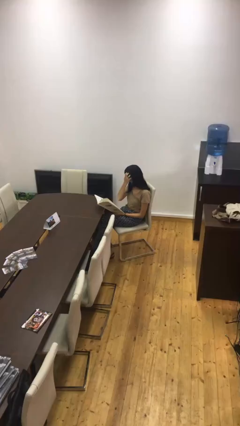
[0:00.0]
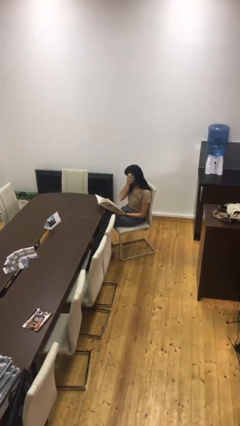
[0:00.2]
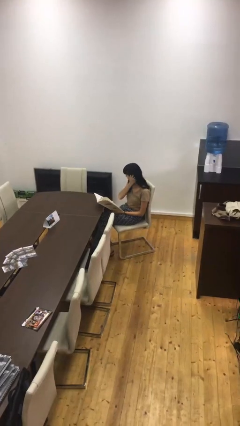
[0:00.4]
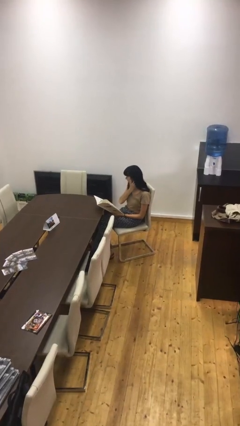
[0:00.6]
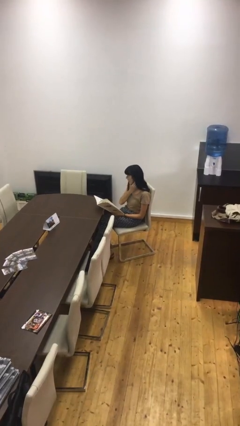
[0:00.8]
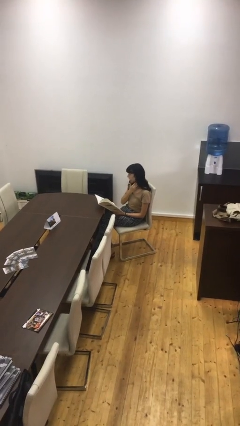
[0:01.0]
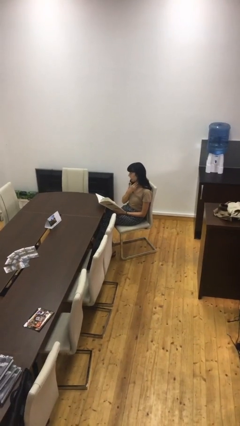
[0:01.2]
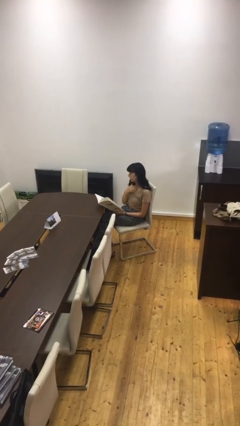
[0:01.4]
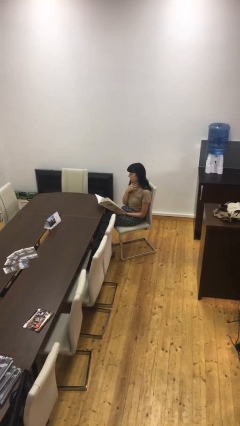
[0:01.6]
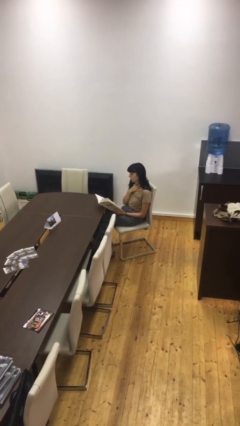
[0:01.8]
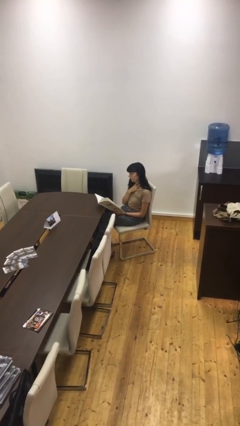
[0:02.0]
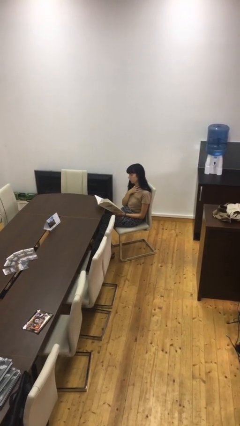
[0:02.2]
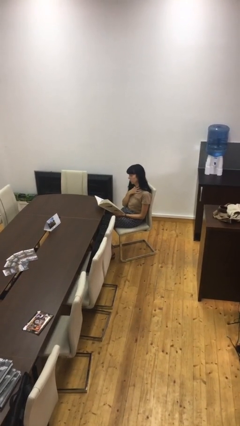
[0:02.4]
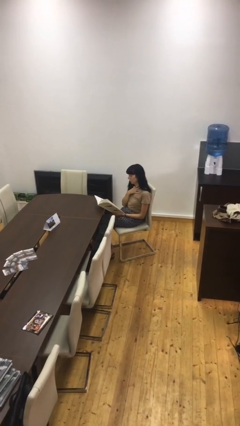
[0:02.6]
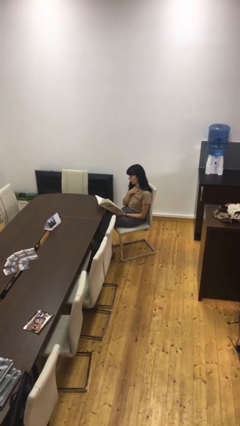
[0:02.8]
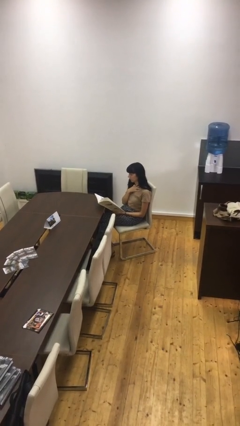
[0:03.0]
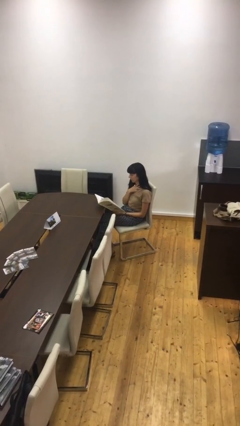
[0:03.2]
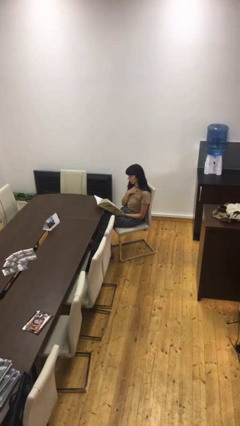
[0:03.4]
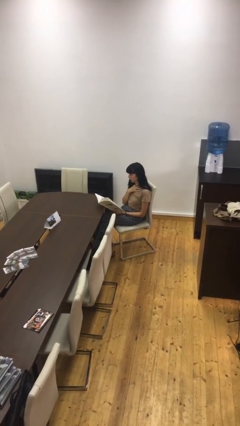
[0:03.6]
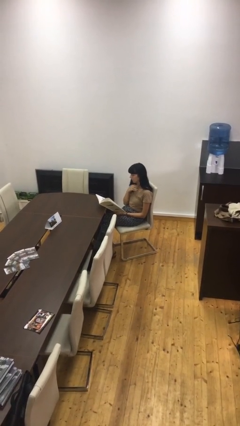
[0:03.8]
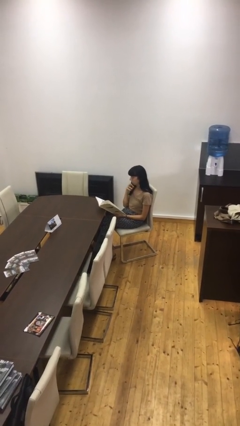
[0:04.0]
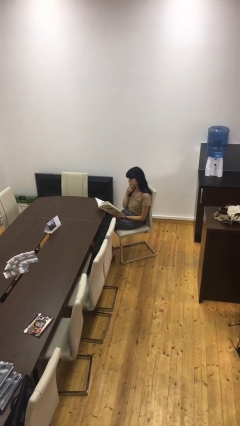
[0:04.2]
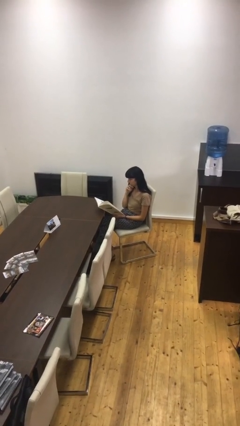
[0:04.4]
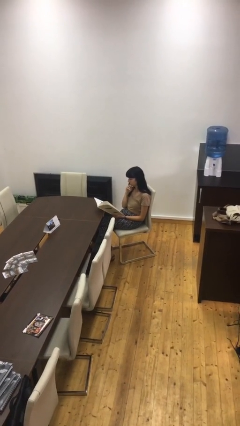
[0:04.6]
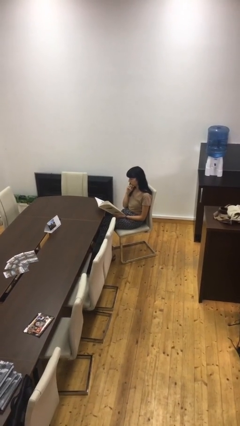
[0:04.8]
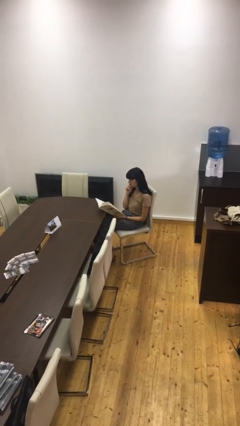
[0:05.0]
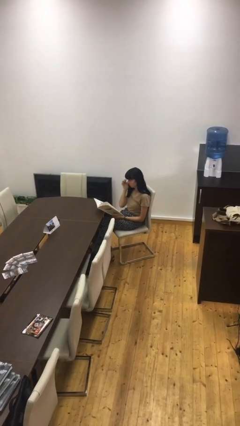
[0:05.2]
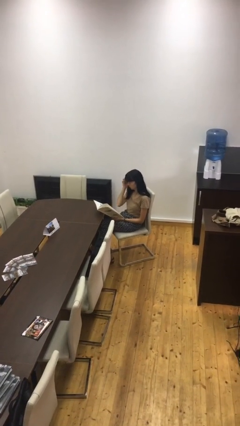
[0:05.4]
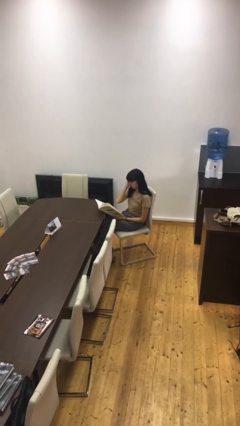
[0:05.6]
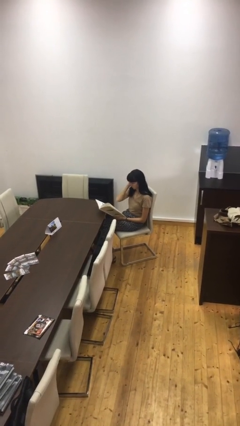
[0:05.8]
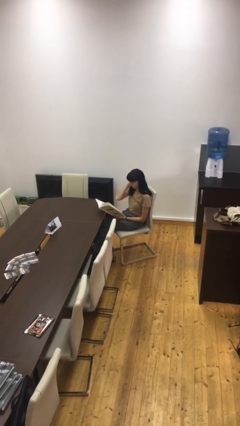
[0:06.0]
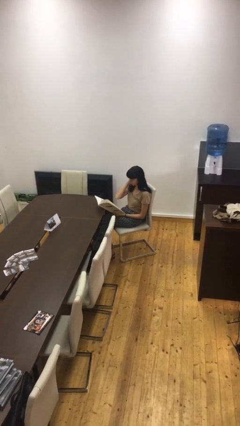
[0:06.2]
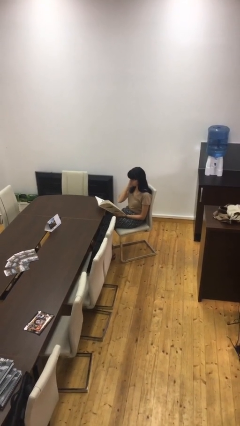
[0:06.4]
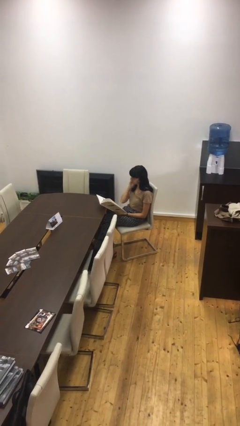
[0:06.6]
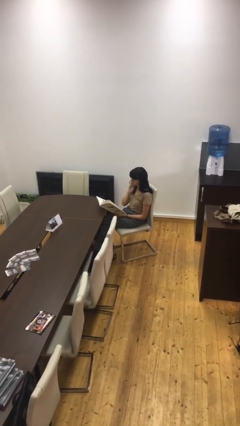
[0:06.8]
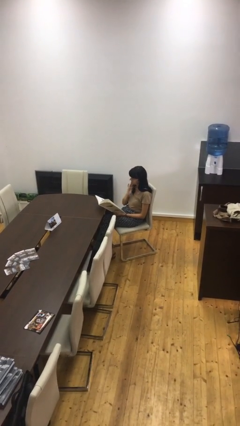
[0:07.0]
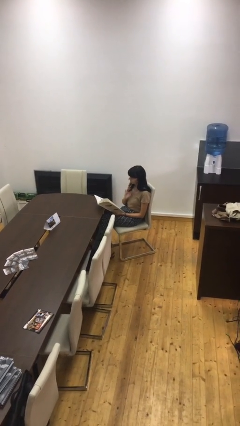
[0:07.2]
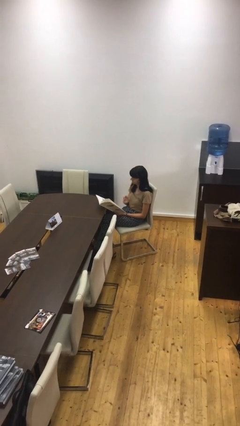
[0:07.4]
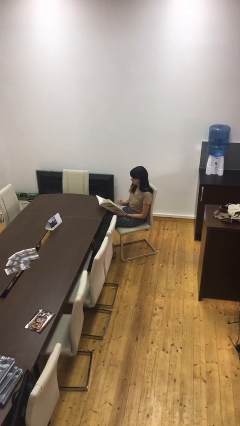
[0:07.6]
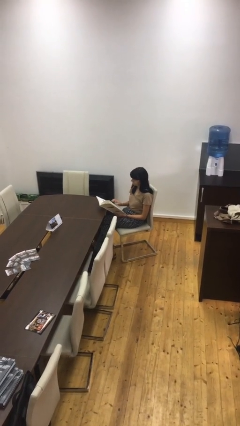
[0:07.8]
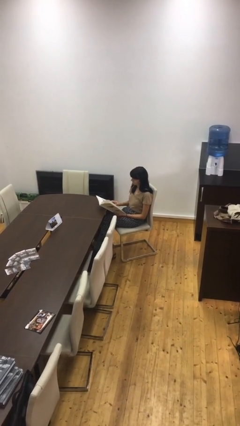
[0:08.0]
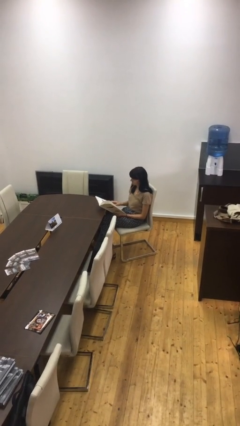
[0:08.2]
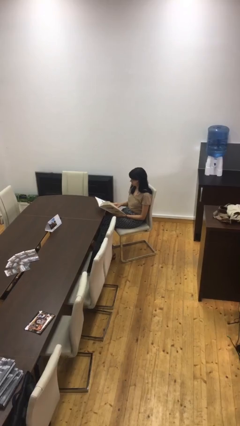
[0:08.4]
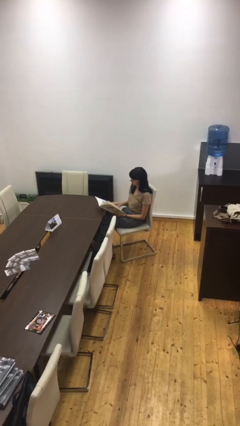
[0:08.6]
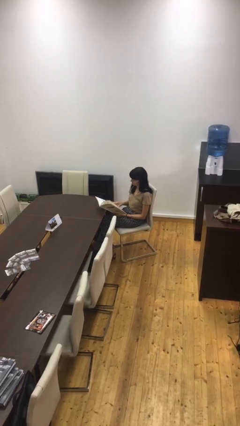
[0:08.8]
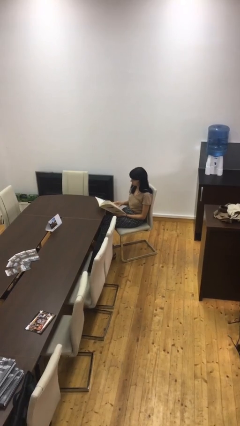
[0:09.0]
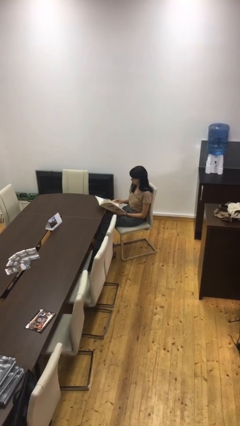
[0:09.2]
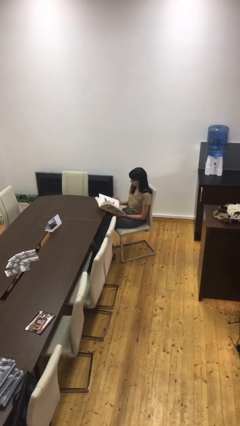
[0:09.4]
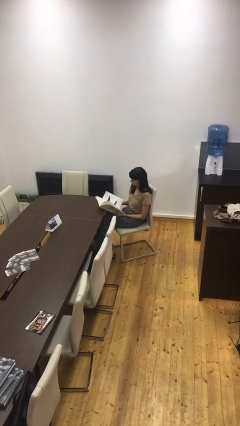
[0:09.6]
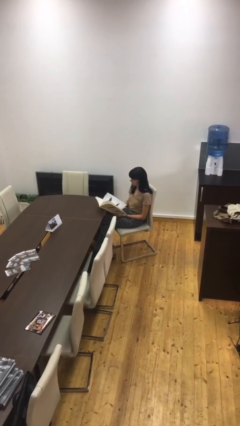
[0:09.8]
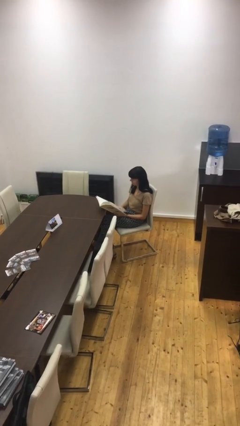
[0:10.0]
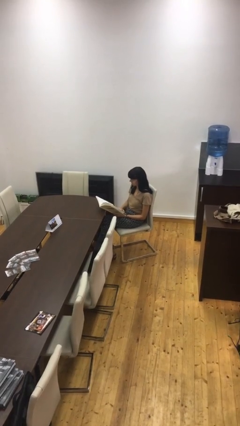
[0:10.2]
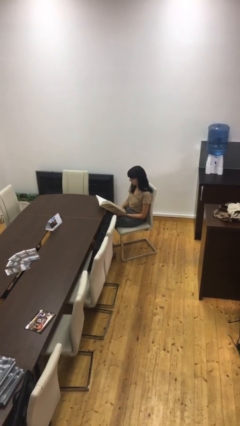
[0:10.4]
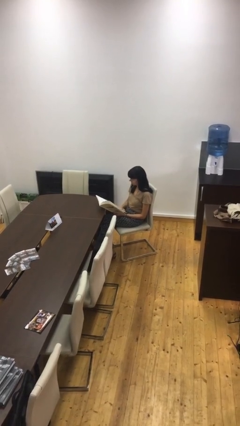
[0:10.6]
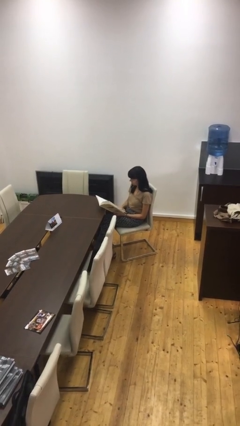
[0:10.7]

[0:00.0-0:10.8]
person reads document

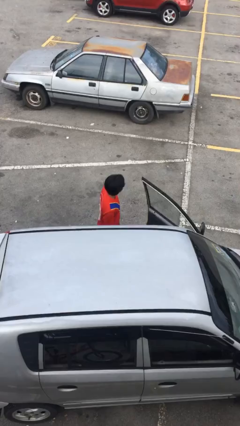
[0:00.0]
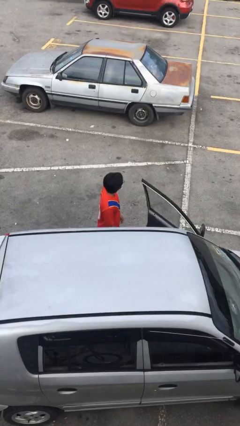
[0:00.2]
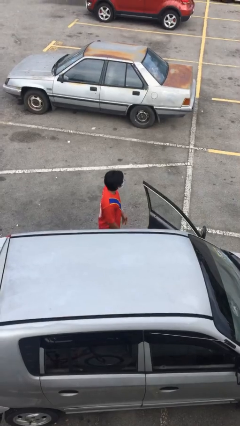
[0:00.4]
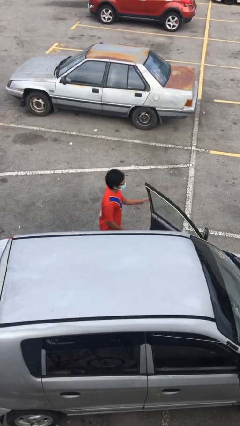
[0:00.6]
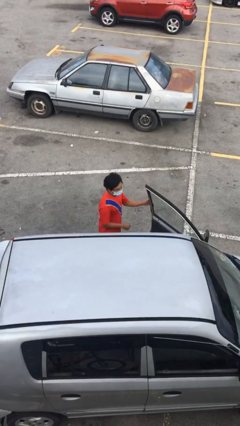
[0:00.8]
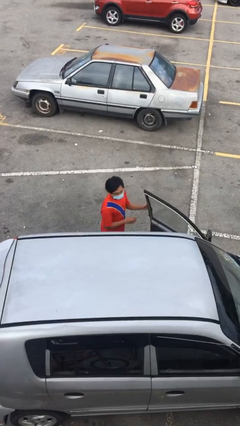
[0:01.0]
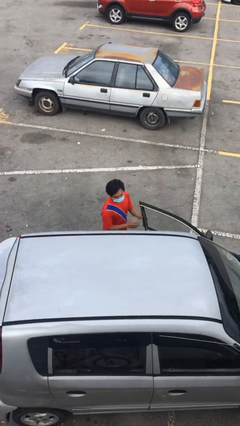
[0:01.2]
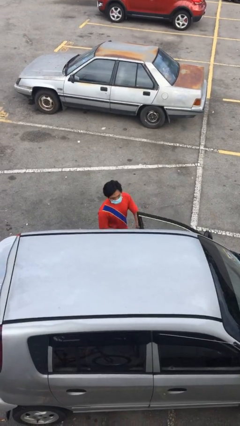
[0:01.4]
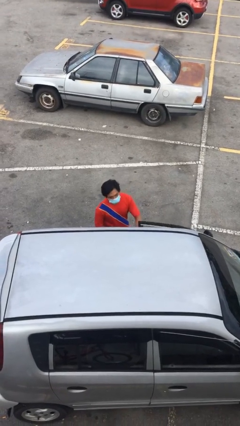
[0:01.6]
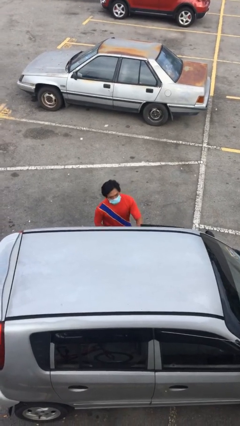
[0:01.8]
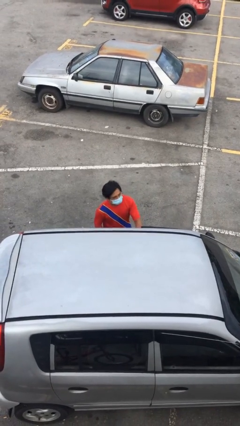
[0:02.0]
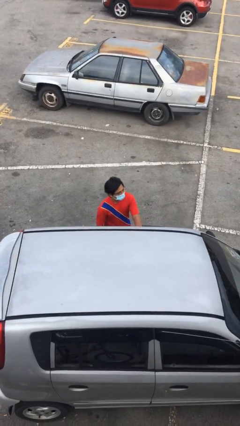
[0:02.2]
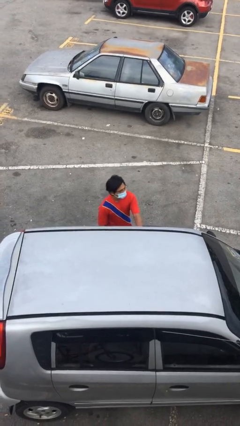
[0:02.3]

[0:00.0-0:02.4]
person closes car door

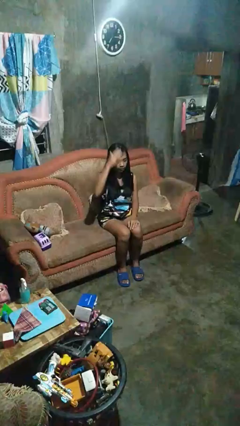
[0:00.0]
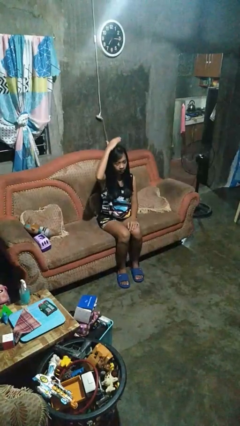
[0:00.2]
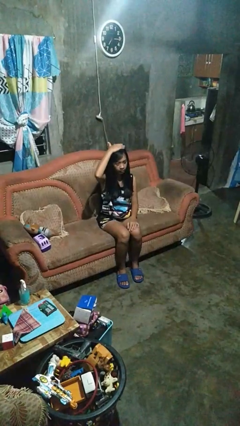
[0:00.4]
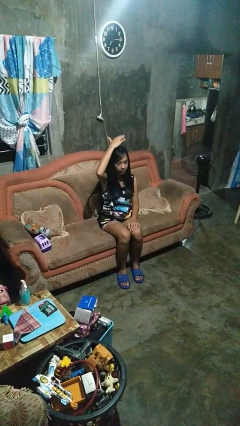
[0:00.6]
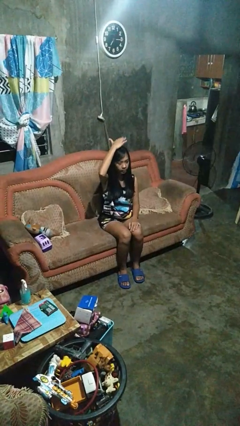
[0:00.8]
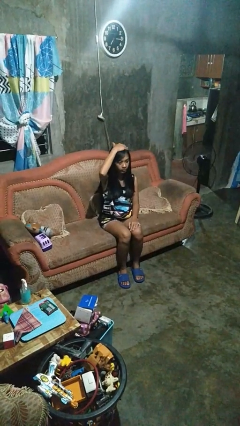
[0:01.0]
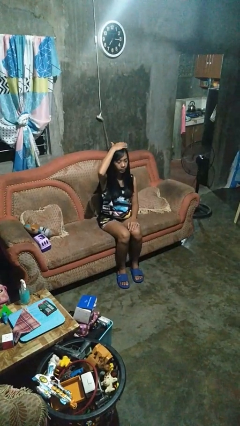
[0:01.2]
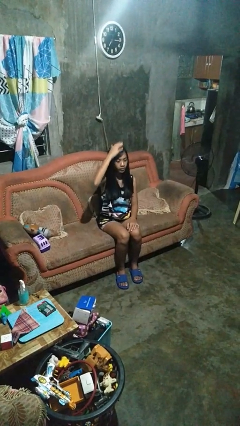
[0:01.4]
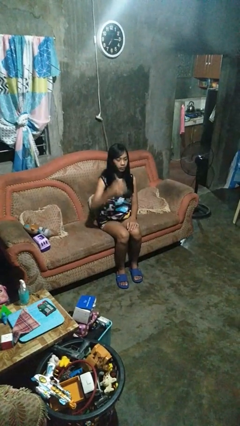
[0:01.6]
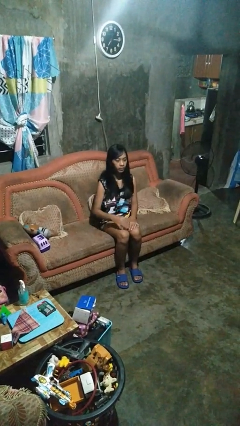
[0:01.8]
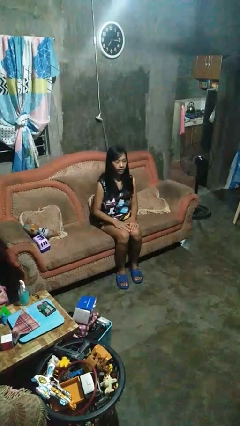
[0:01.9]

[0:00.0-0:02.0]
person pats head

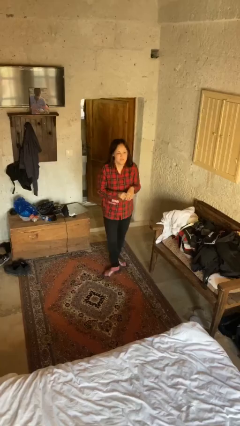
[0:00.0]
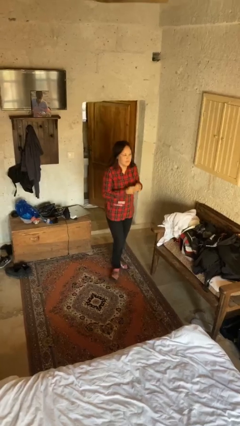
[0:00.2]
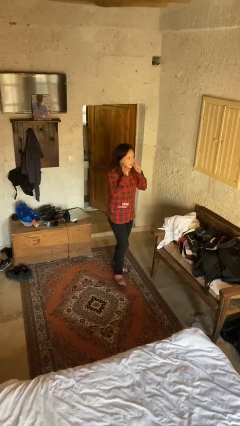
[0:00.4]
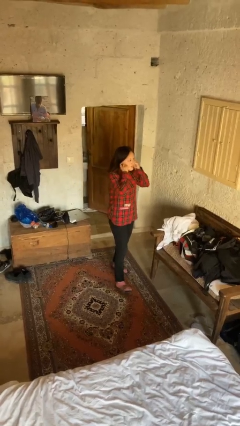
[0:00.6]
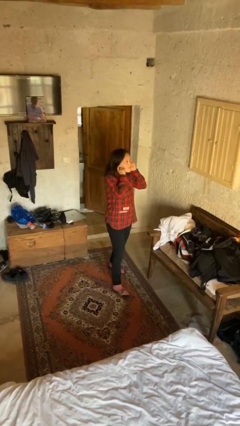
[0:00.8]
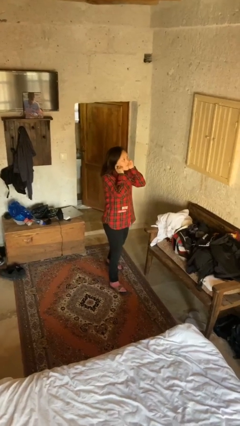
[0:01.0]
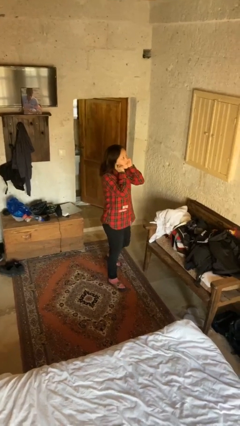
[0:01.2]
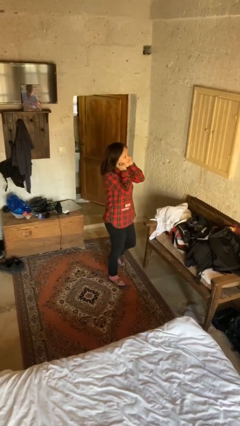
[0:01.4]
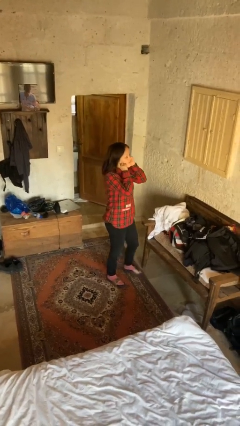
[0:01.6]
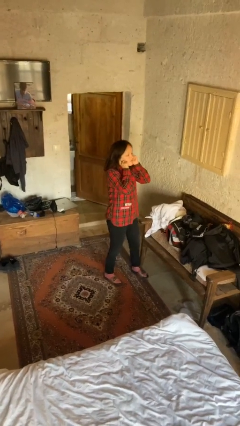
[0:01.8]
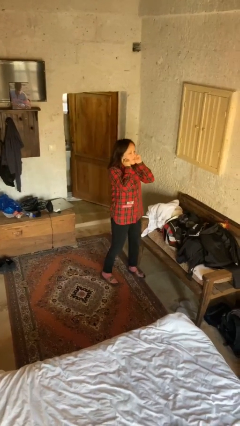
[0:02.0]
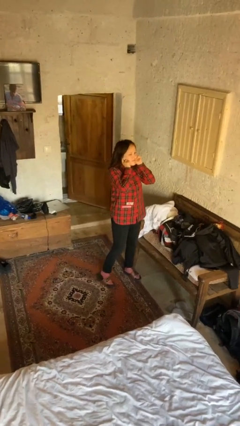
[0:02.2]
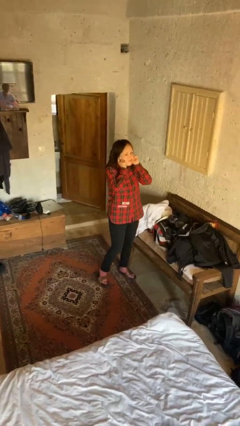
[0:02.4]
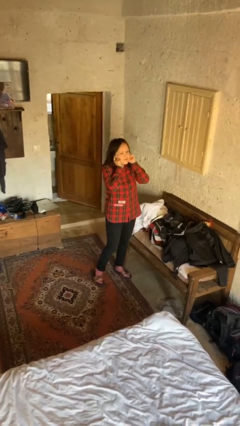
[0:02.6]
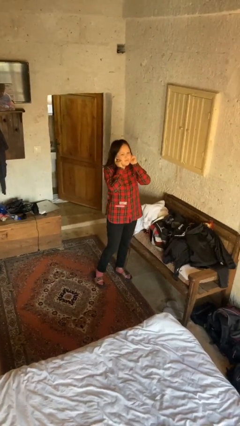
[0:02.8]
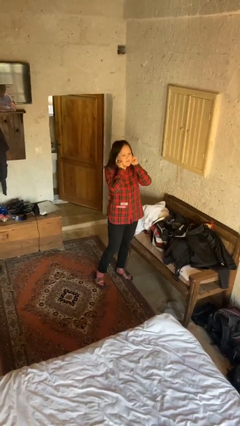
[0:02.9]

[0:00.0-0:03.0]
person puts fingers in ear
